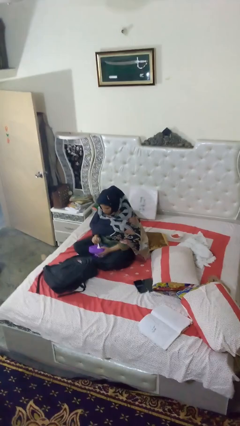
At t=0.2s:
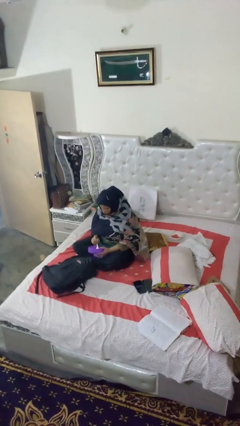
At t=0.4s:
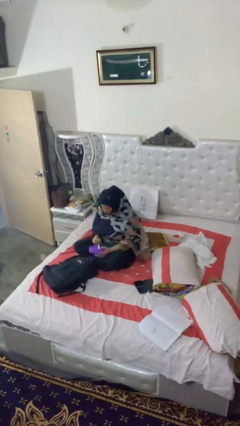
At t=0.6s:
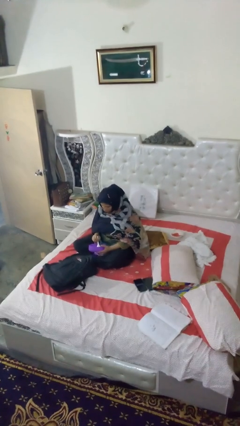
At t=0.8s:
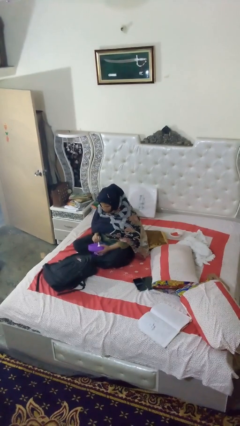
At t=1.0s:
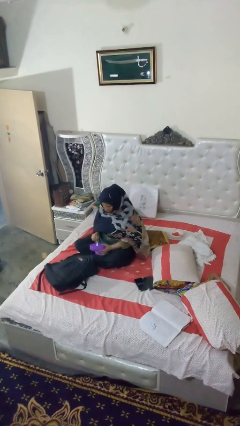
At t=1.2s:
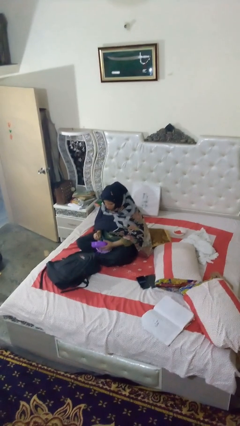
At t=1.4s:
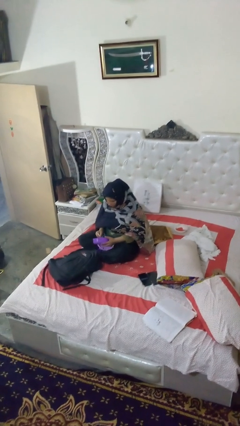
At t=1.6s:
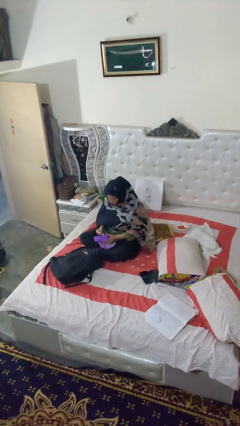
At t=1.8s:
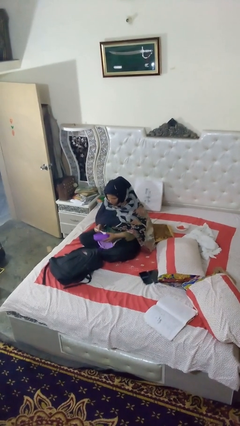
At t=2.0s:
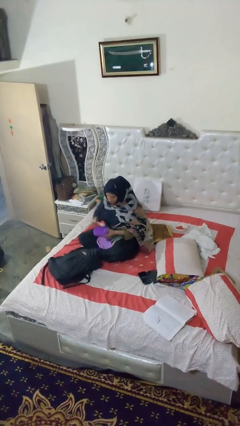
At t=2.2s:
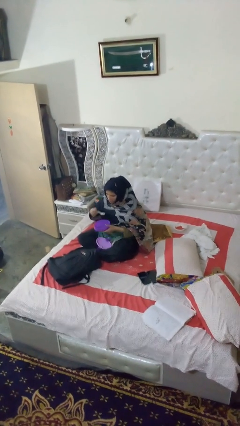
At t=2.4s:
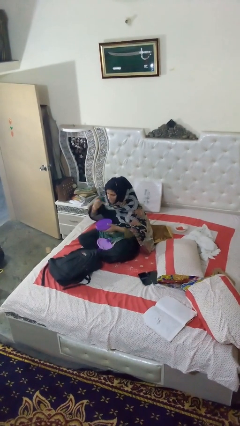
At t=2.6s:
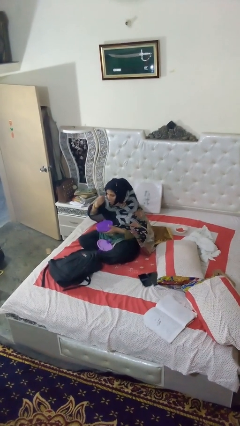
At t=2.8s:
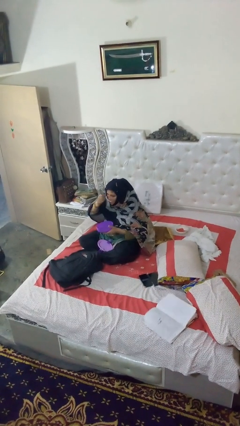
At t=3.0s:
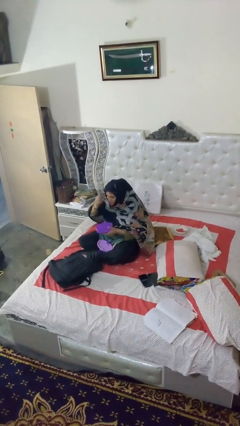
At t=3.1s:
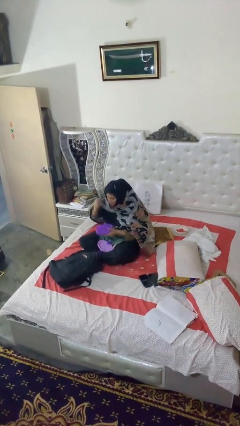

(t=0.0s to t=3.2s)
person eats snack from bag

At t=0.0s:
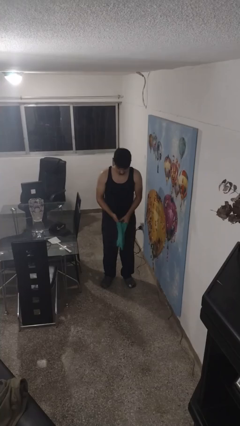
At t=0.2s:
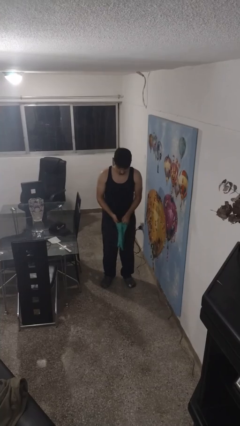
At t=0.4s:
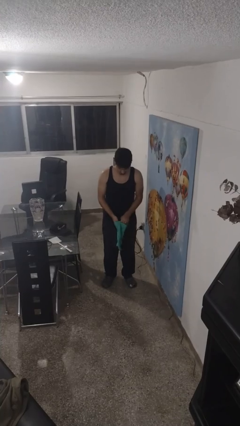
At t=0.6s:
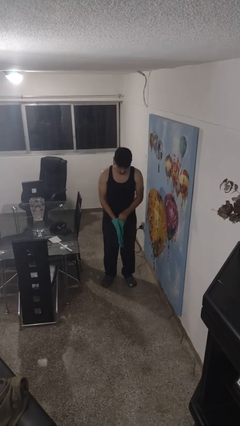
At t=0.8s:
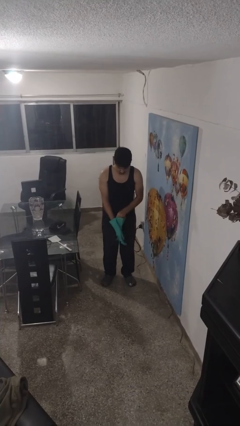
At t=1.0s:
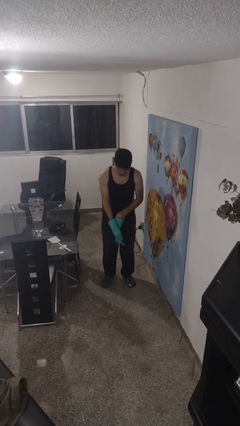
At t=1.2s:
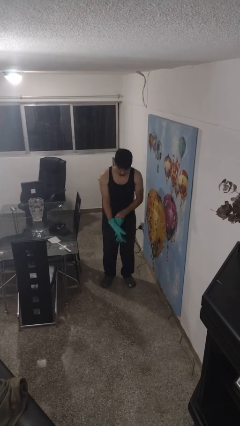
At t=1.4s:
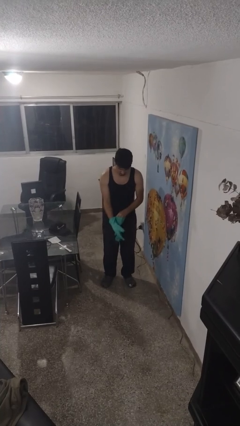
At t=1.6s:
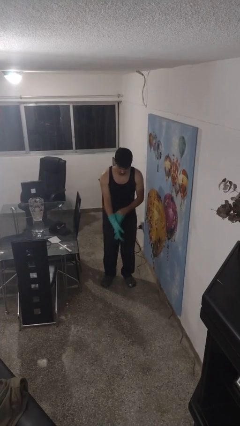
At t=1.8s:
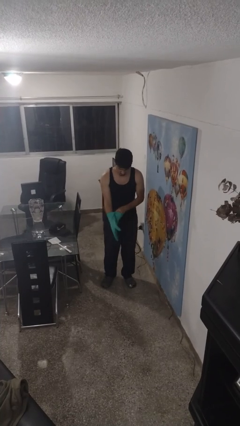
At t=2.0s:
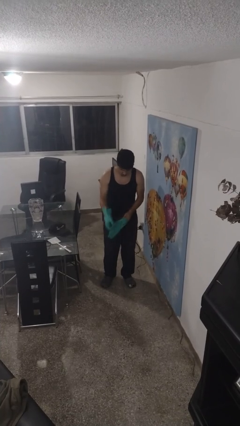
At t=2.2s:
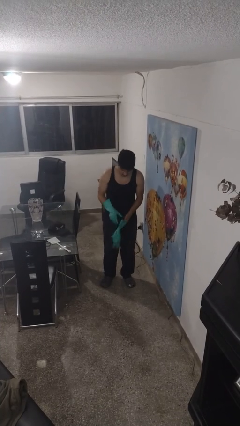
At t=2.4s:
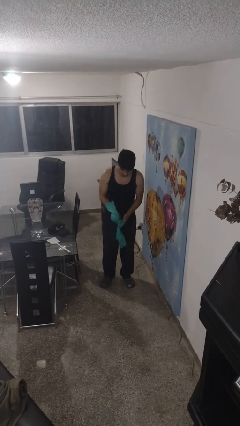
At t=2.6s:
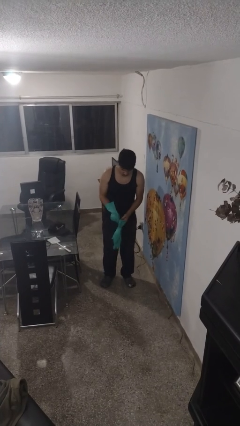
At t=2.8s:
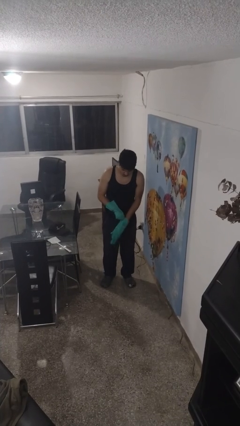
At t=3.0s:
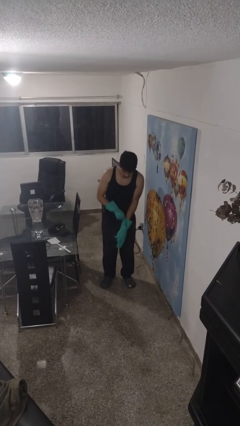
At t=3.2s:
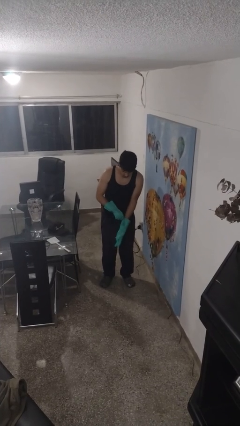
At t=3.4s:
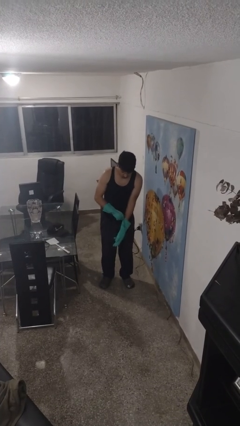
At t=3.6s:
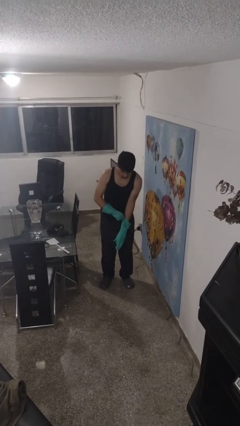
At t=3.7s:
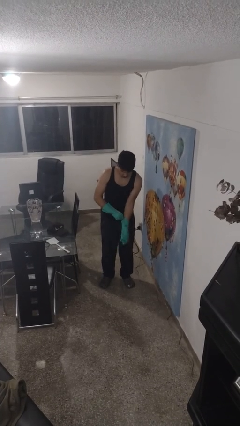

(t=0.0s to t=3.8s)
person puts on gloves

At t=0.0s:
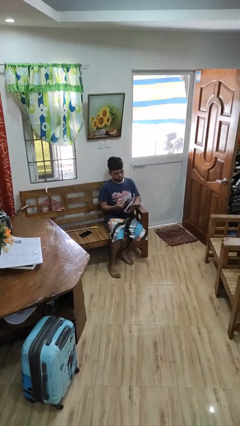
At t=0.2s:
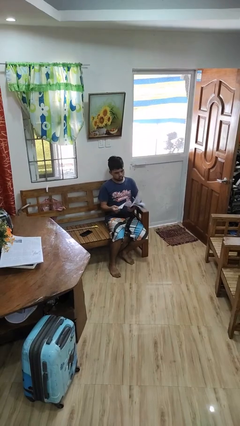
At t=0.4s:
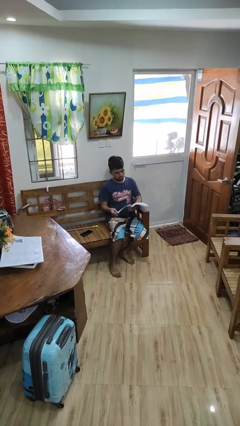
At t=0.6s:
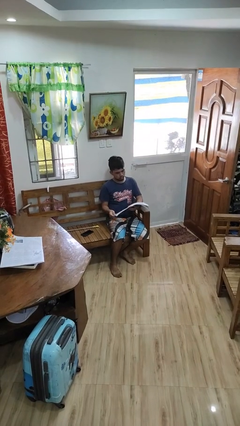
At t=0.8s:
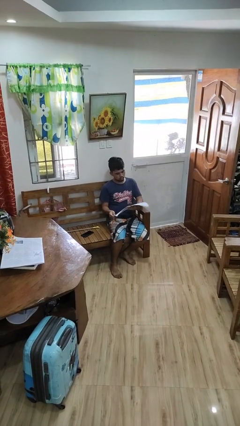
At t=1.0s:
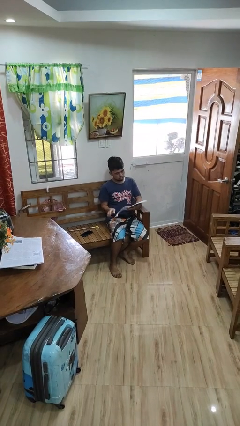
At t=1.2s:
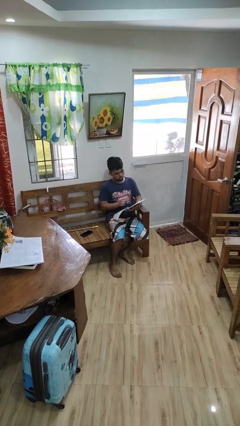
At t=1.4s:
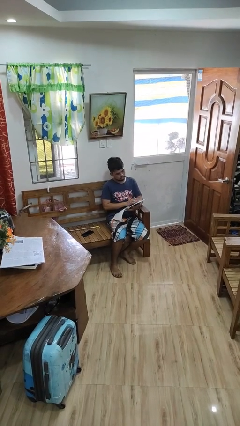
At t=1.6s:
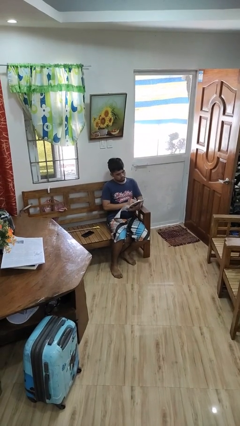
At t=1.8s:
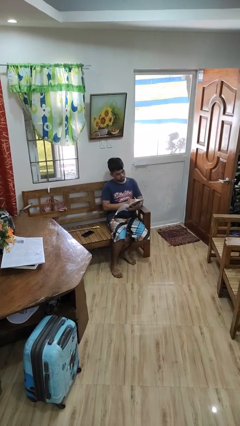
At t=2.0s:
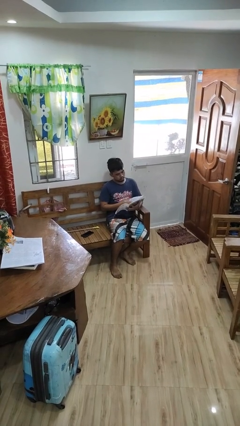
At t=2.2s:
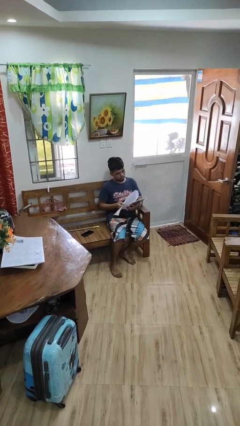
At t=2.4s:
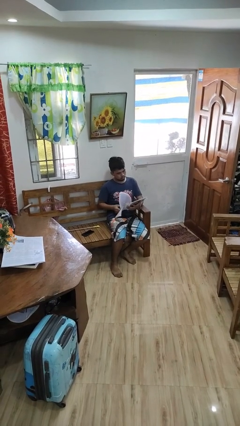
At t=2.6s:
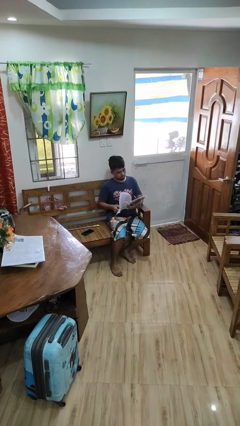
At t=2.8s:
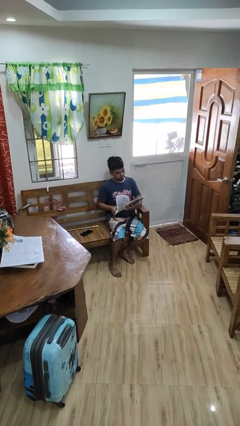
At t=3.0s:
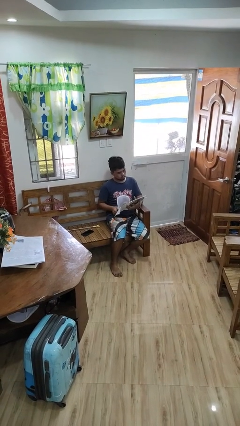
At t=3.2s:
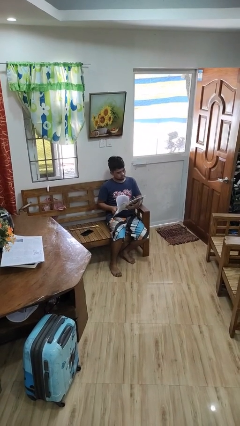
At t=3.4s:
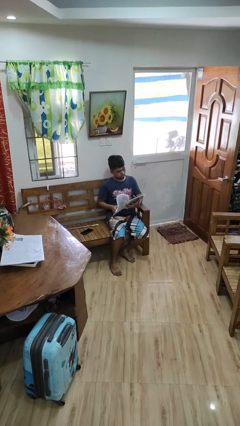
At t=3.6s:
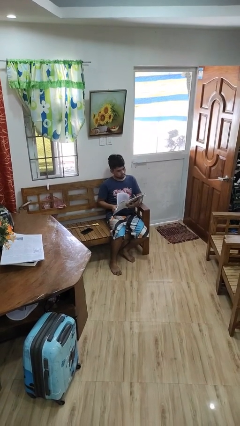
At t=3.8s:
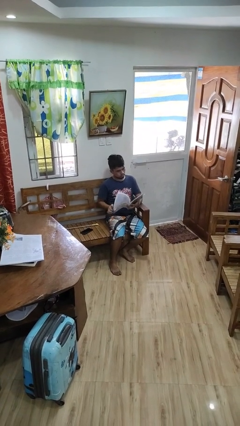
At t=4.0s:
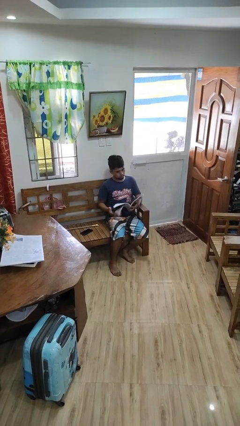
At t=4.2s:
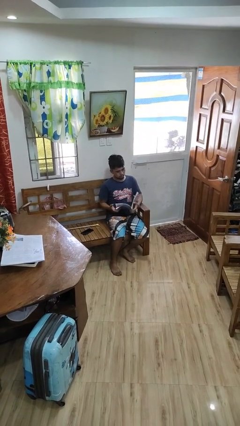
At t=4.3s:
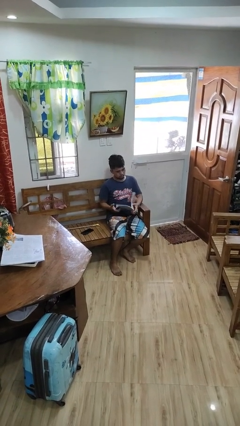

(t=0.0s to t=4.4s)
person reads magazine

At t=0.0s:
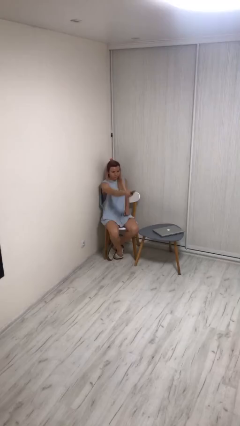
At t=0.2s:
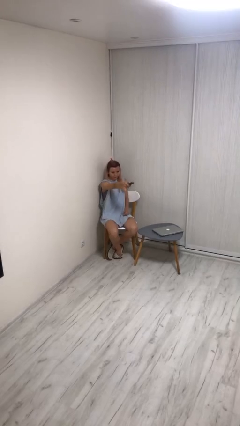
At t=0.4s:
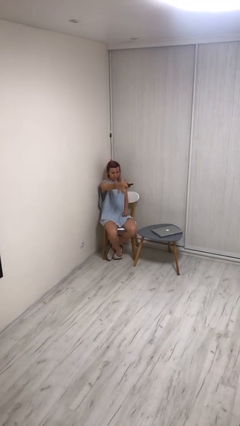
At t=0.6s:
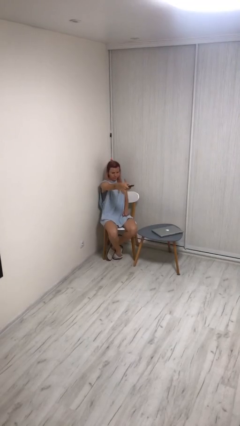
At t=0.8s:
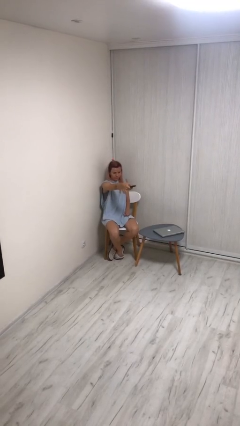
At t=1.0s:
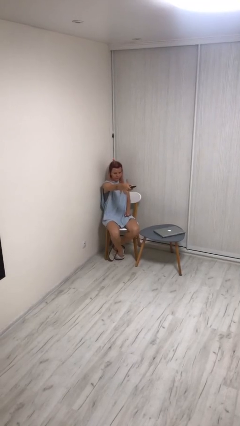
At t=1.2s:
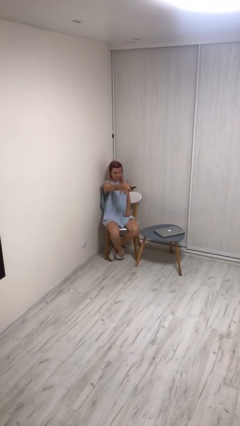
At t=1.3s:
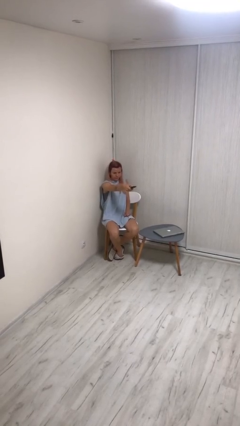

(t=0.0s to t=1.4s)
person uses television remote

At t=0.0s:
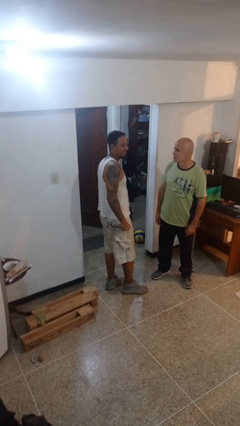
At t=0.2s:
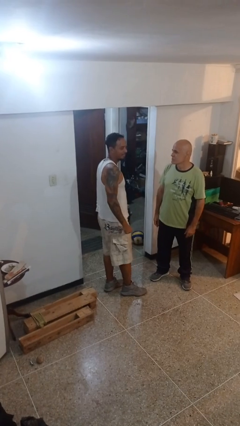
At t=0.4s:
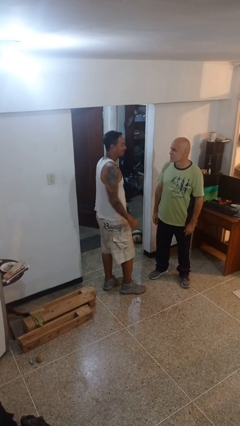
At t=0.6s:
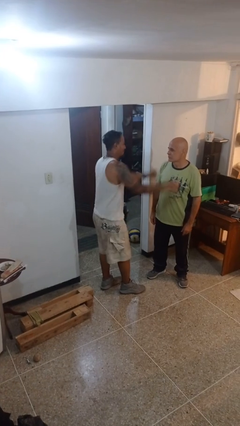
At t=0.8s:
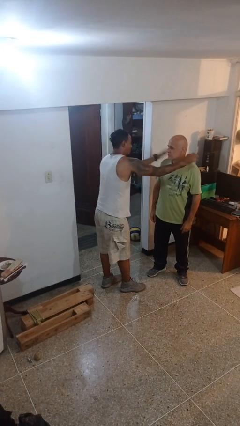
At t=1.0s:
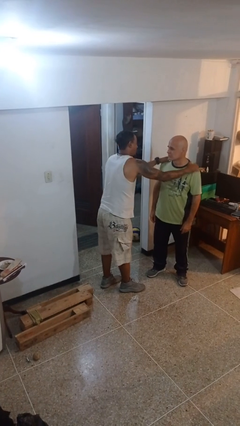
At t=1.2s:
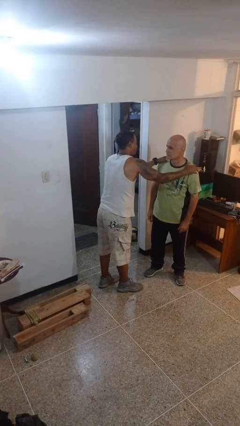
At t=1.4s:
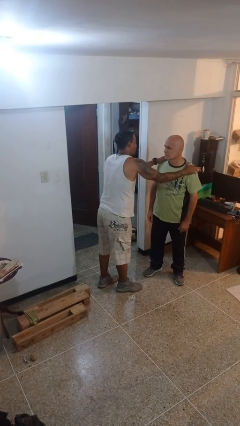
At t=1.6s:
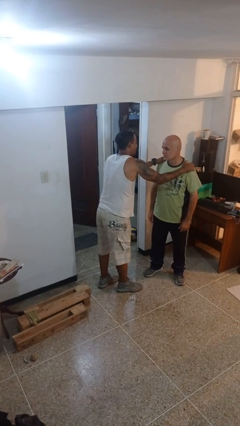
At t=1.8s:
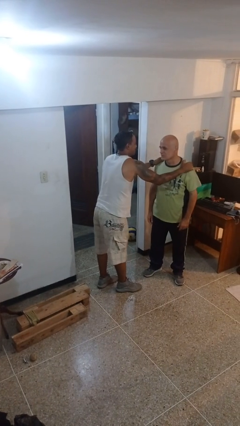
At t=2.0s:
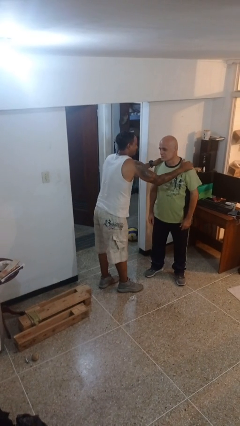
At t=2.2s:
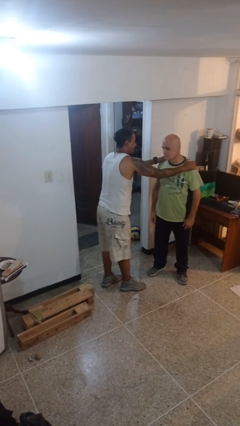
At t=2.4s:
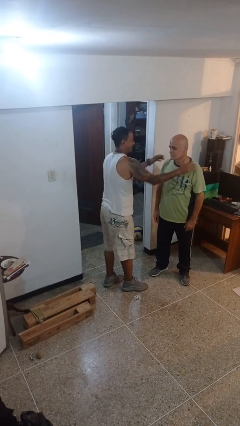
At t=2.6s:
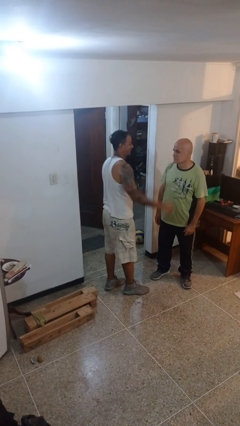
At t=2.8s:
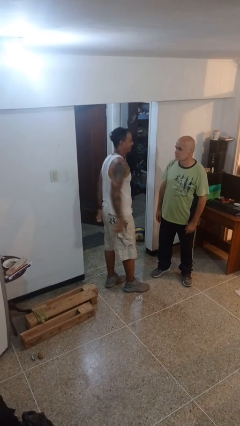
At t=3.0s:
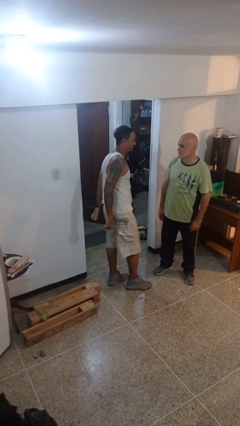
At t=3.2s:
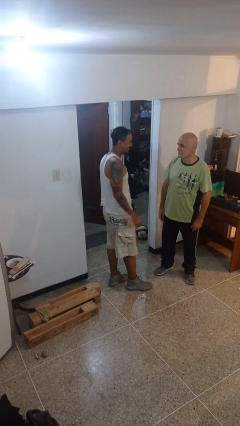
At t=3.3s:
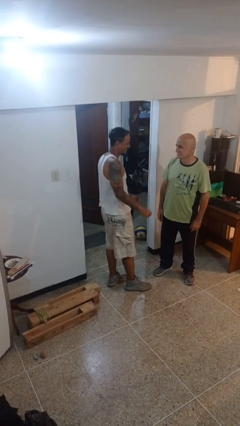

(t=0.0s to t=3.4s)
person pounds shoulders of person

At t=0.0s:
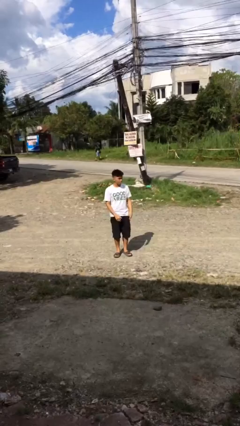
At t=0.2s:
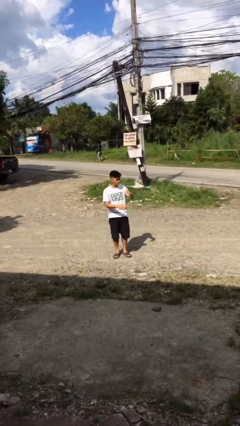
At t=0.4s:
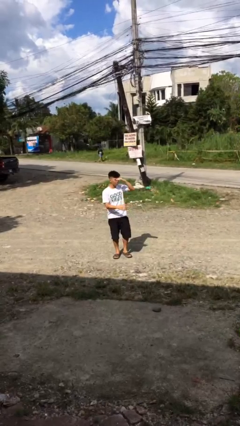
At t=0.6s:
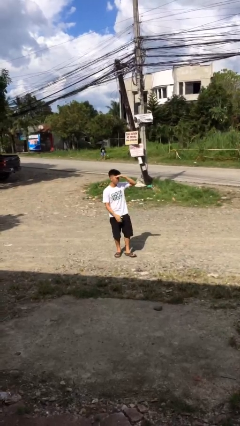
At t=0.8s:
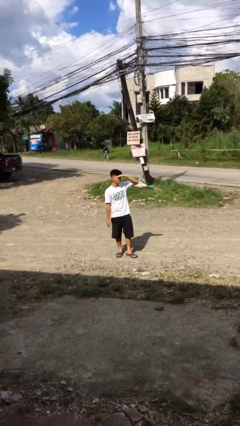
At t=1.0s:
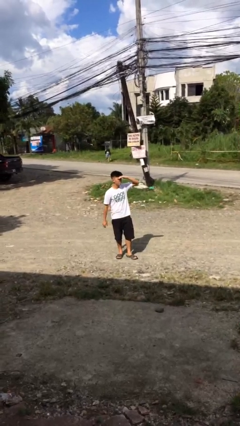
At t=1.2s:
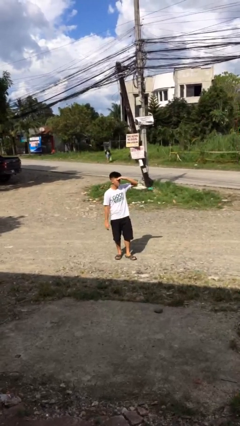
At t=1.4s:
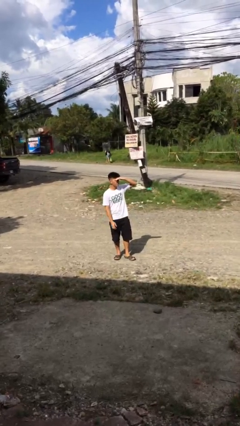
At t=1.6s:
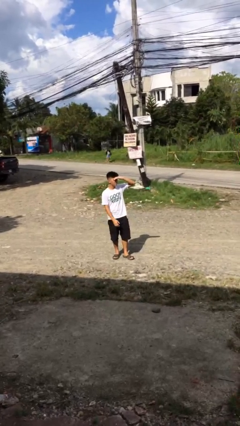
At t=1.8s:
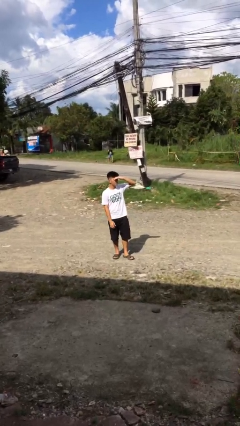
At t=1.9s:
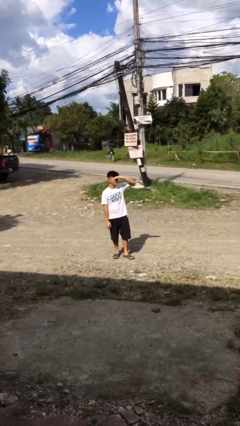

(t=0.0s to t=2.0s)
person shades eyes
